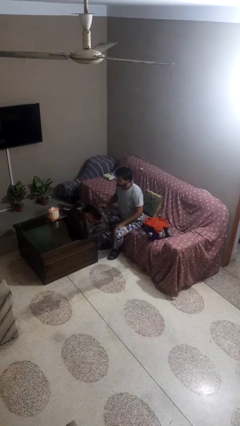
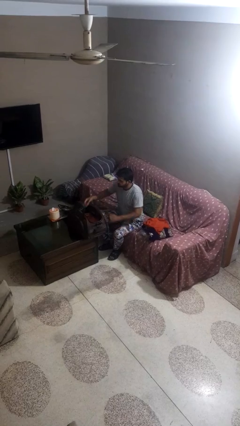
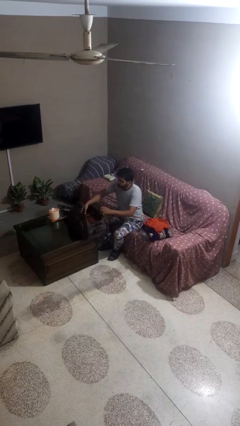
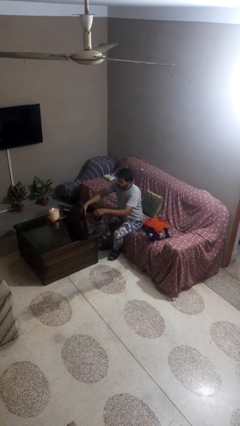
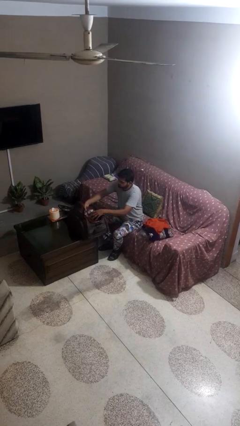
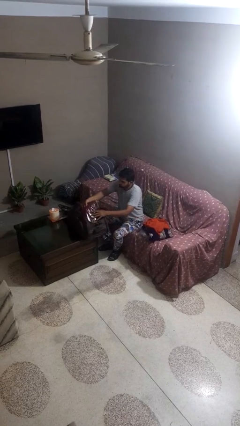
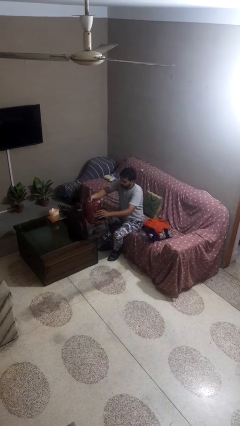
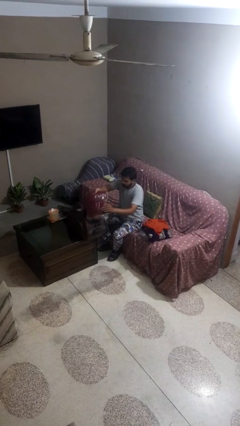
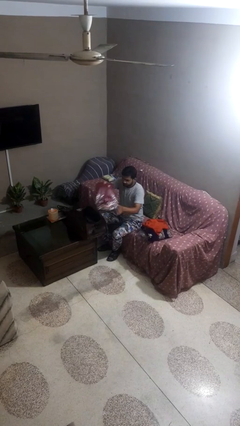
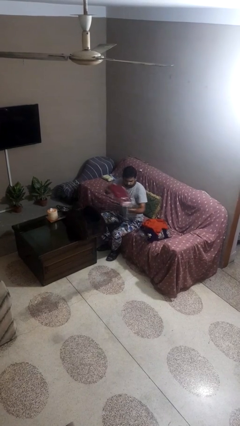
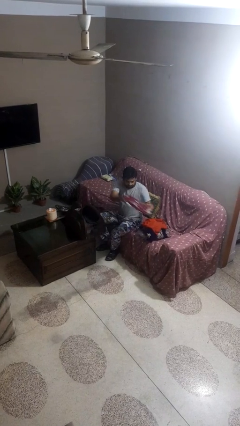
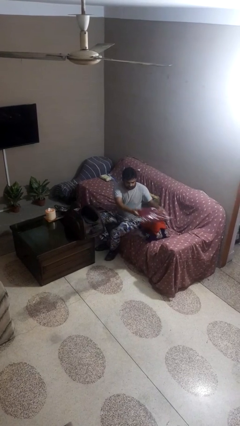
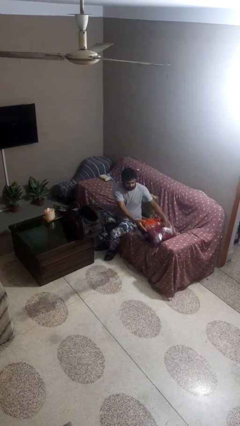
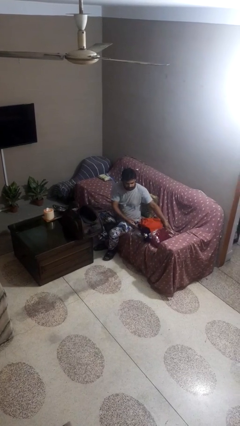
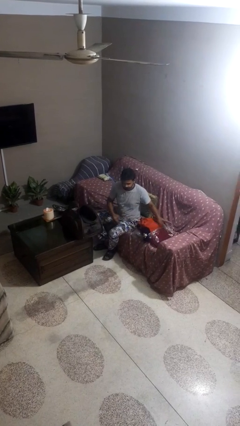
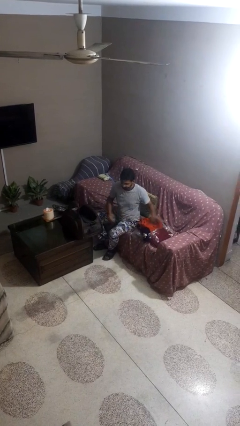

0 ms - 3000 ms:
person unloads clothes from suitcase

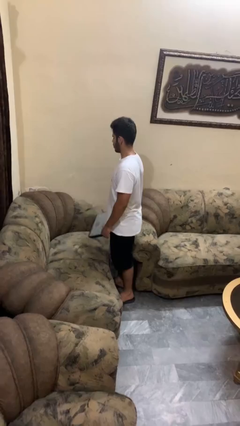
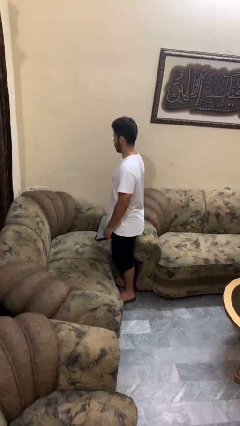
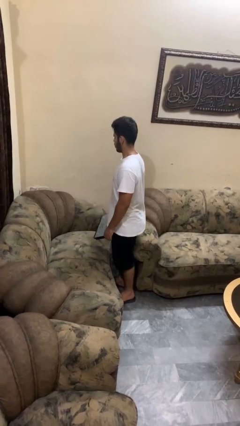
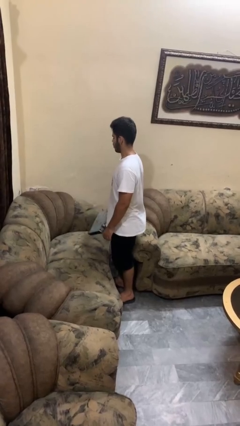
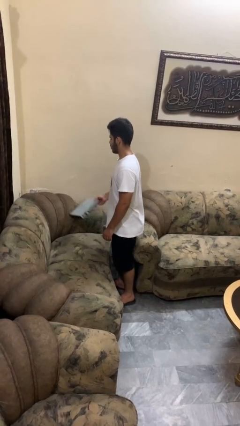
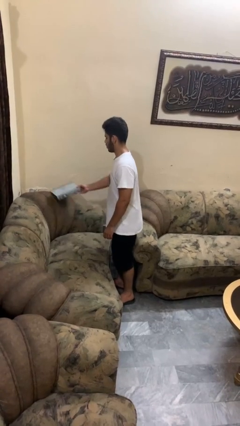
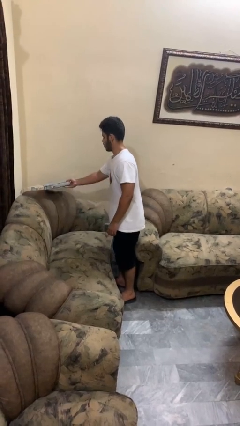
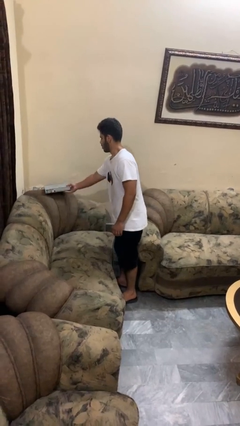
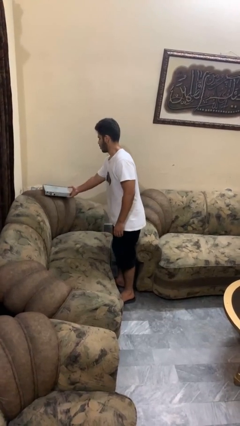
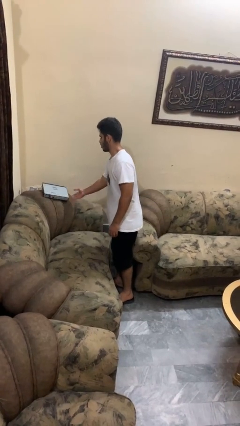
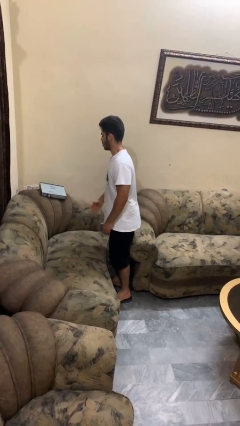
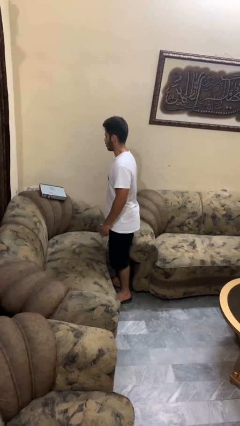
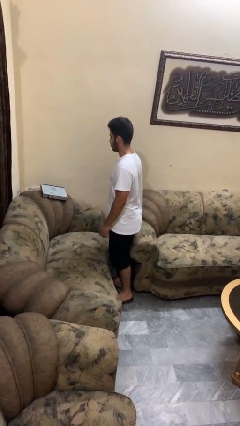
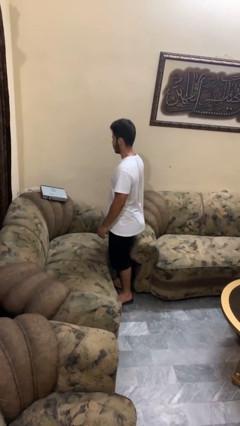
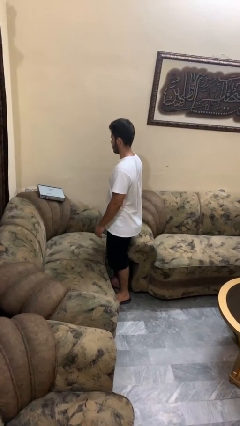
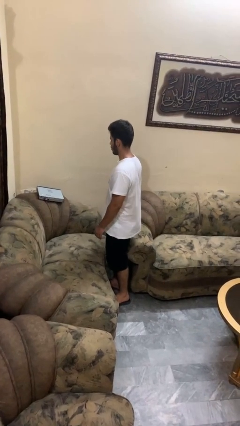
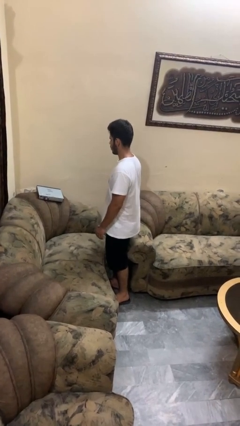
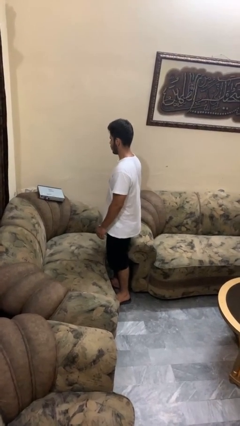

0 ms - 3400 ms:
person puts down object on couch

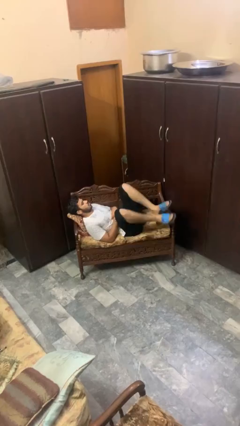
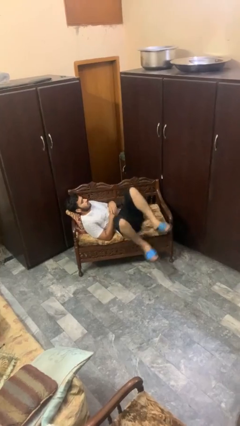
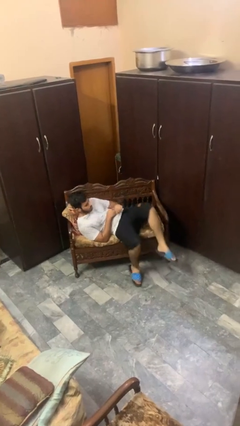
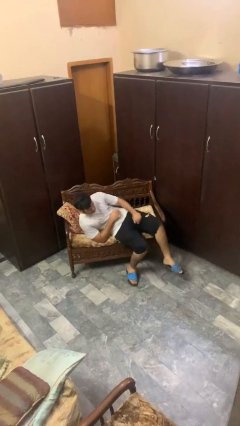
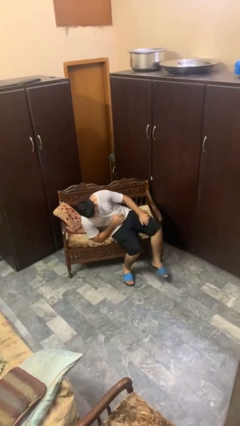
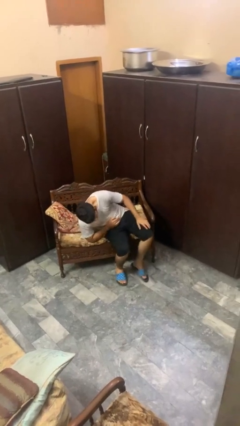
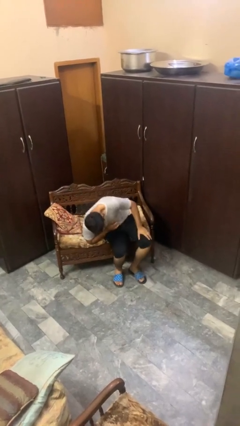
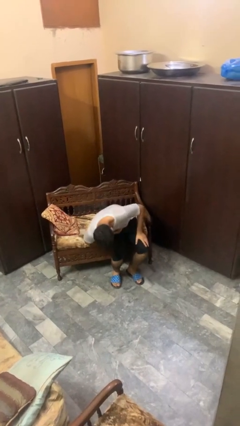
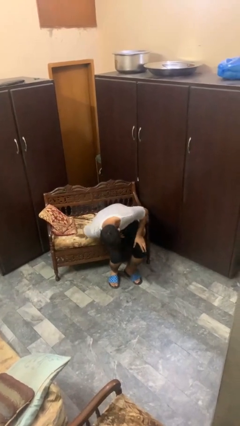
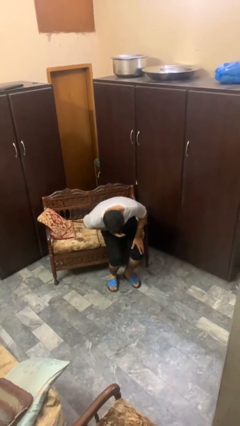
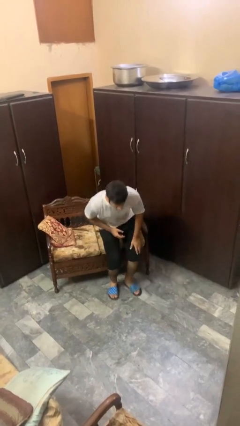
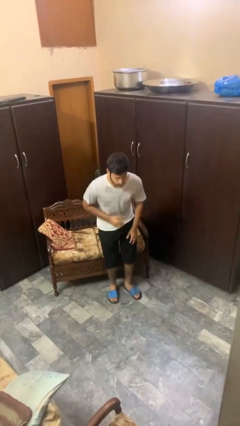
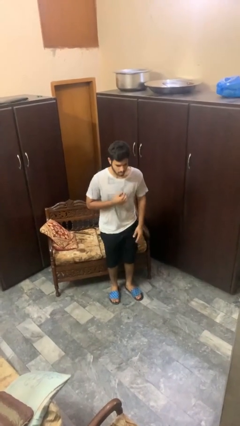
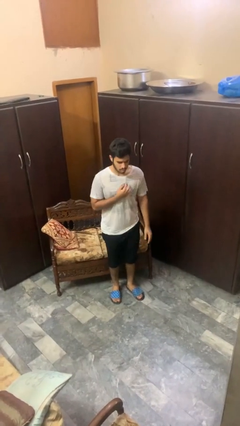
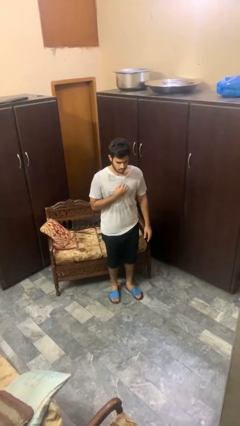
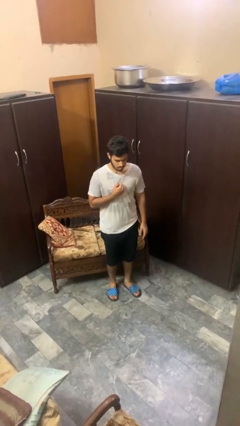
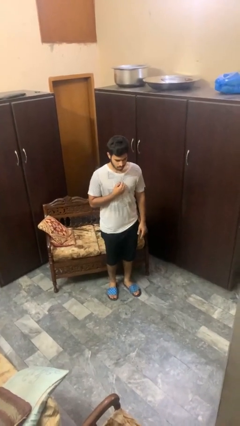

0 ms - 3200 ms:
person stands up

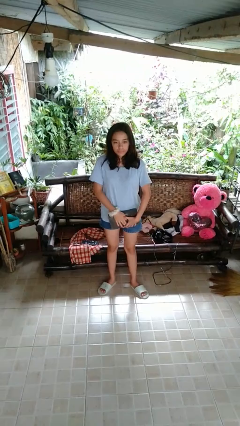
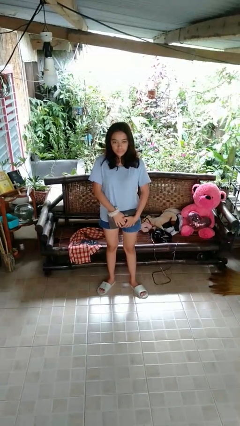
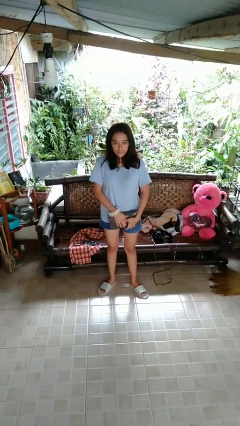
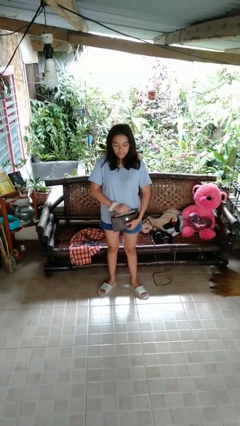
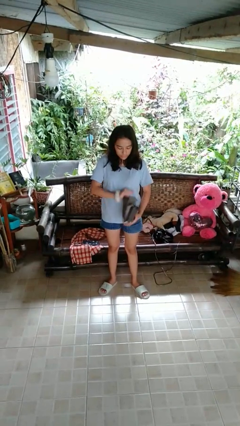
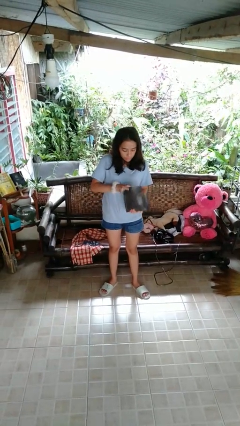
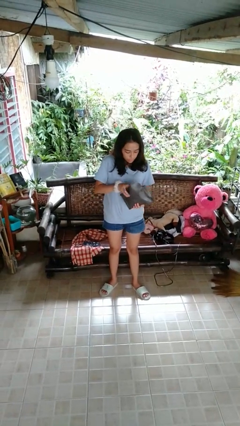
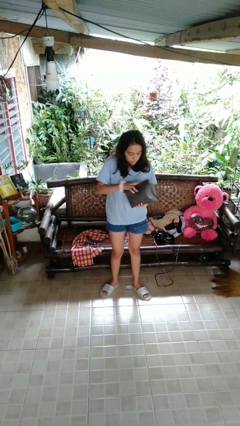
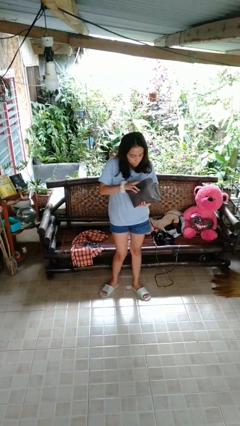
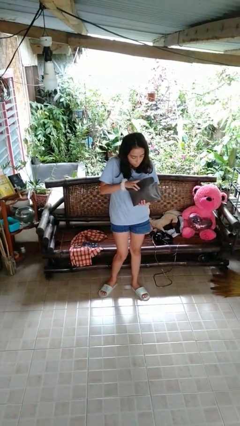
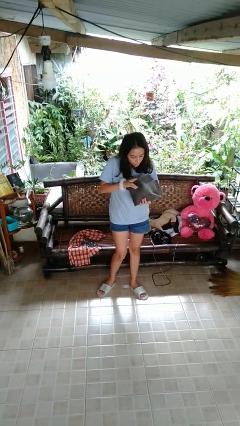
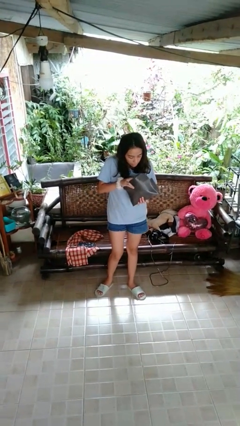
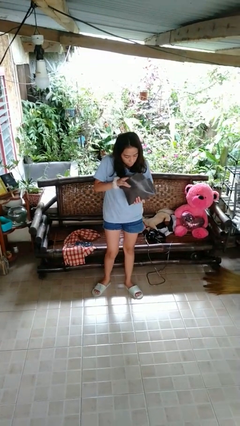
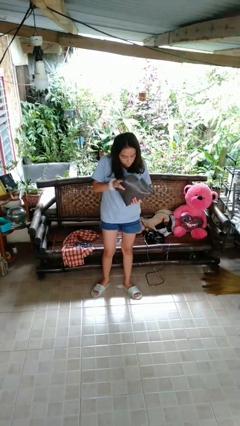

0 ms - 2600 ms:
person searches in purse

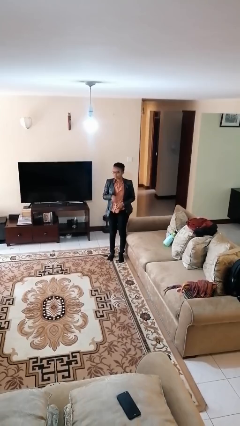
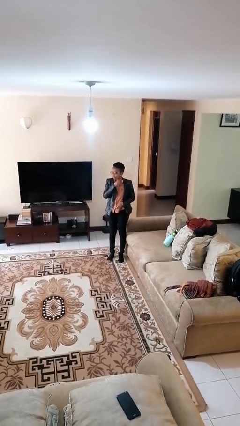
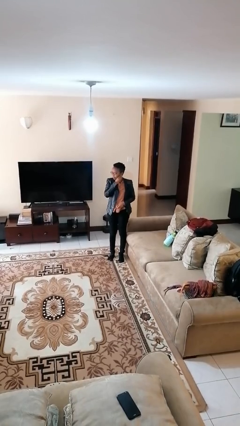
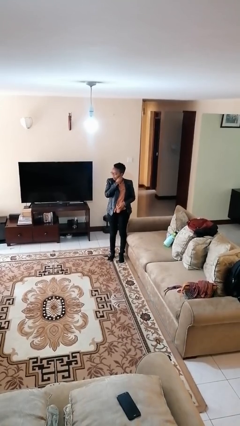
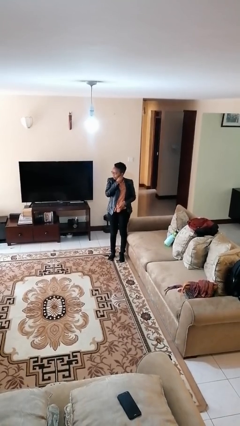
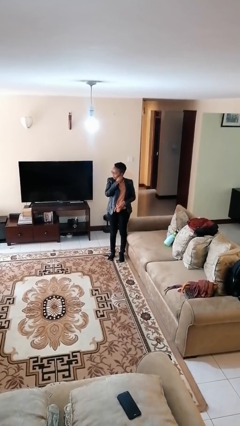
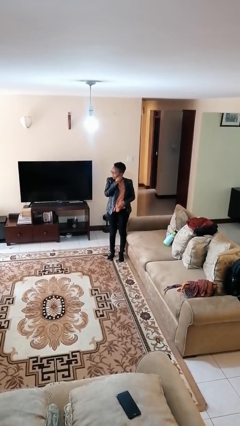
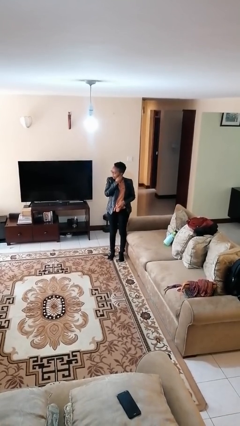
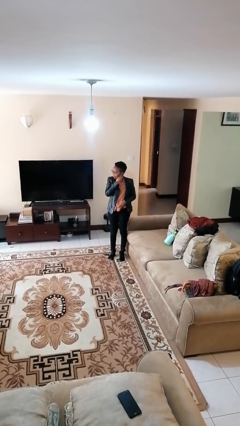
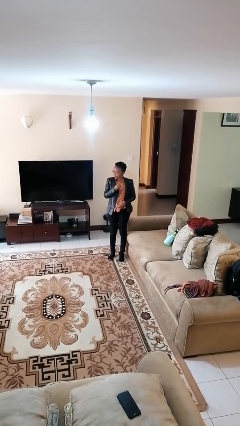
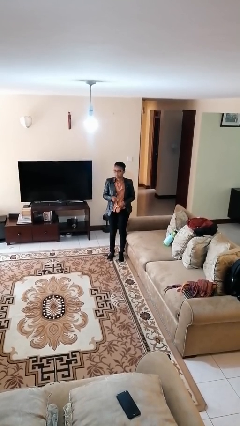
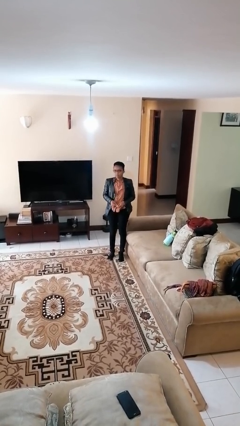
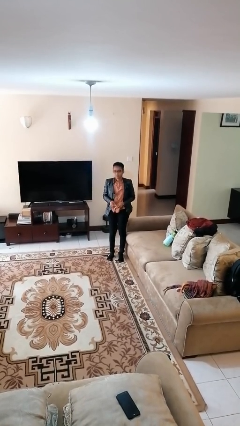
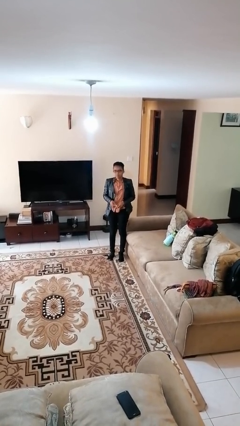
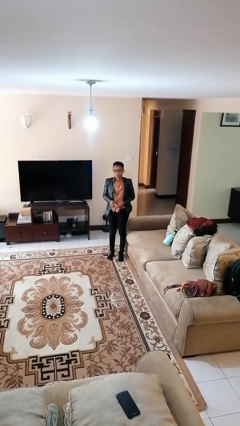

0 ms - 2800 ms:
person takes off earrings

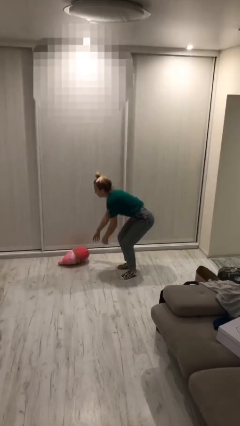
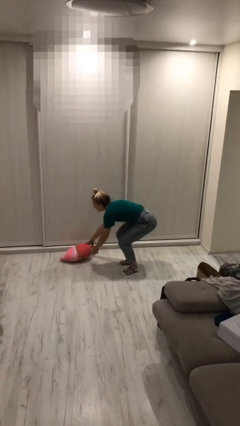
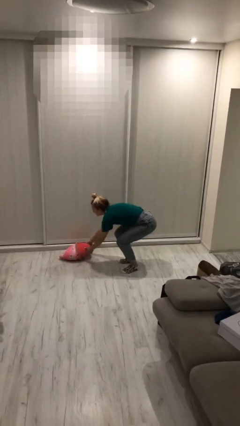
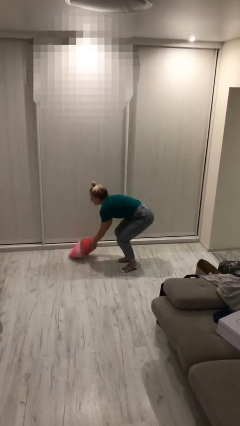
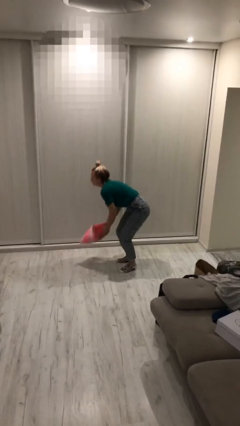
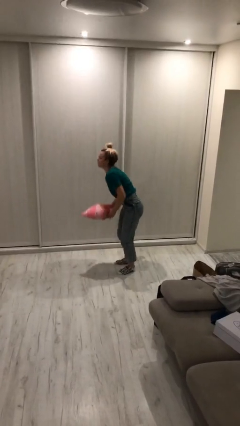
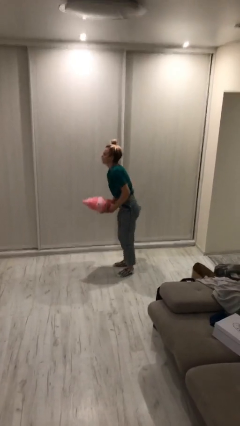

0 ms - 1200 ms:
person picks up object from floor

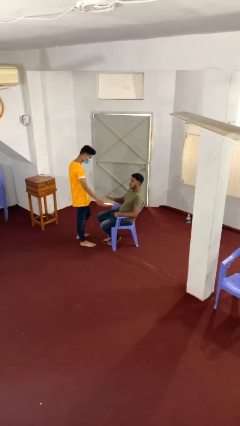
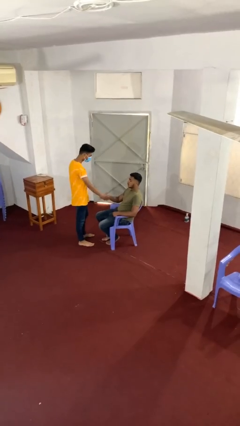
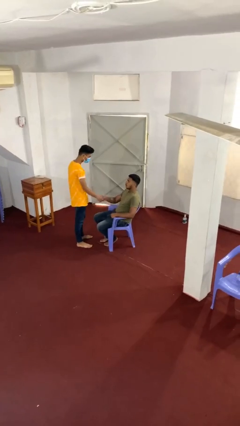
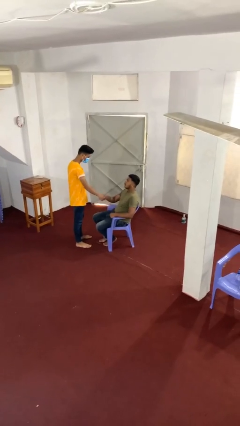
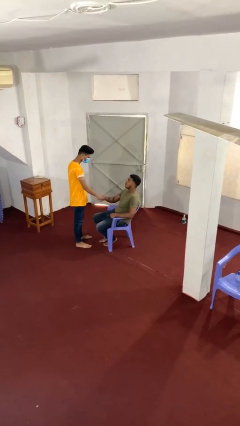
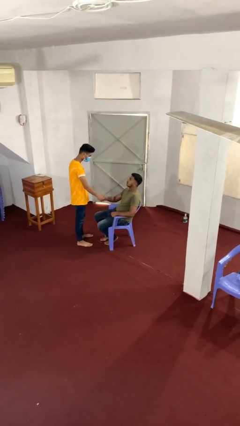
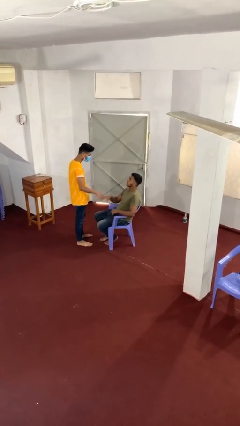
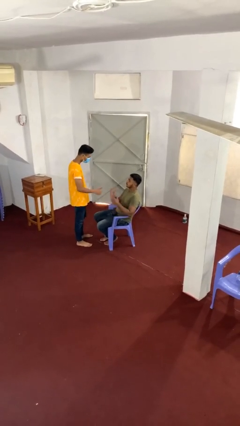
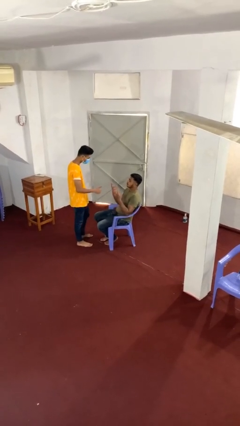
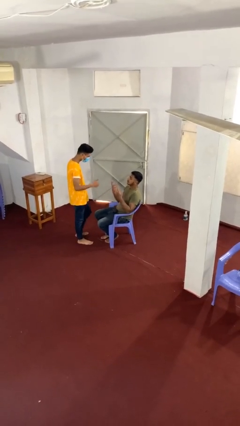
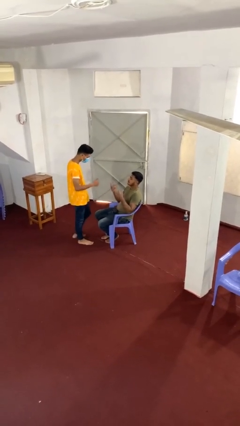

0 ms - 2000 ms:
person shakes hand
